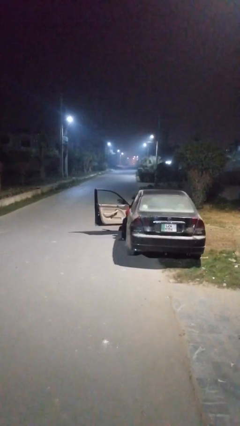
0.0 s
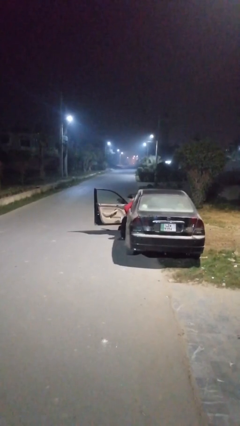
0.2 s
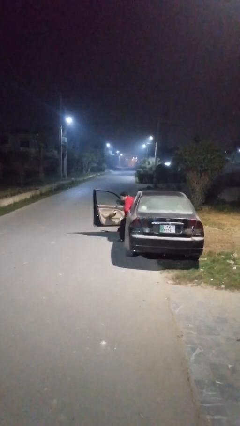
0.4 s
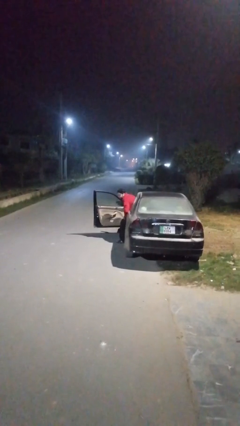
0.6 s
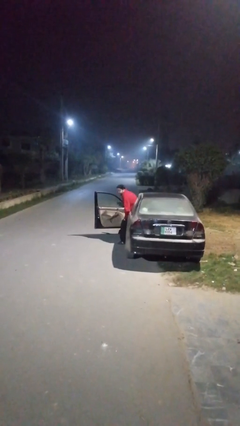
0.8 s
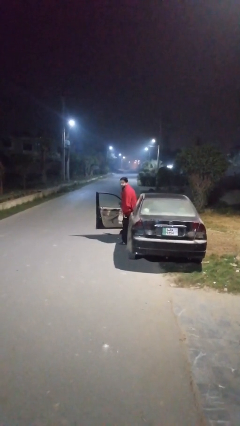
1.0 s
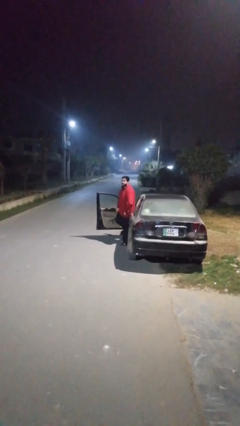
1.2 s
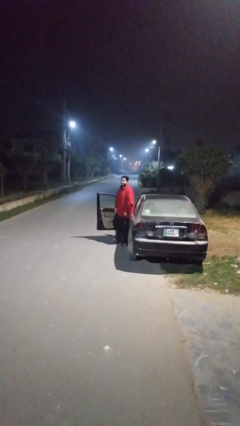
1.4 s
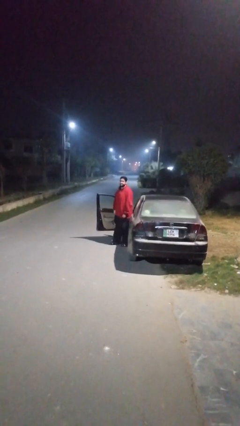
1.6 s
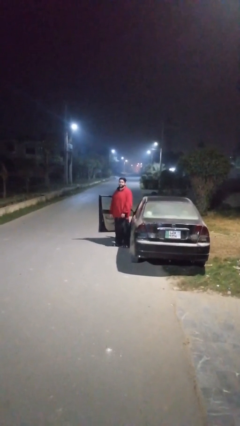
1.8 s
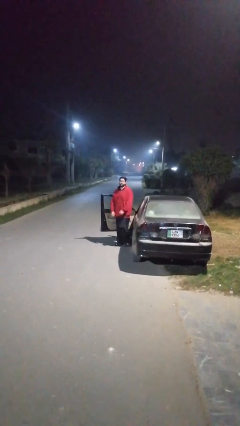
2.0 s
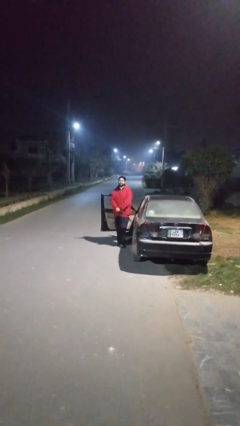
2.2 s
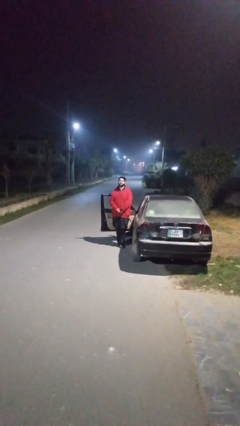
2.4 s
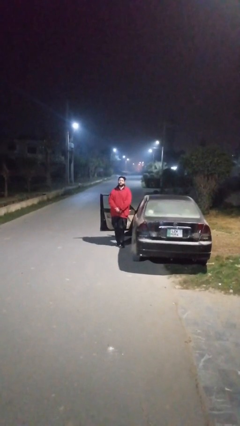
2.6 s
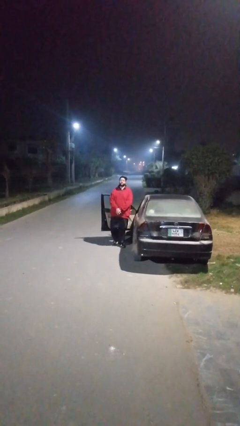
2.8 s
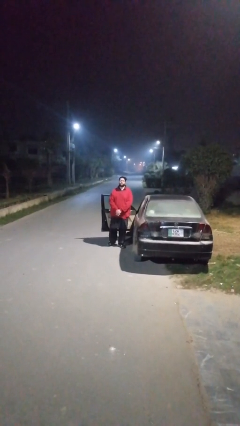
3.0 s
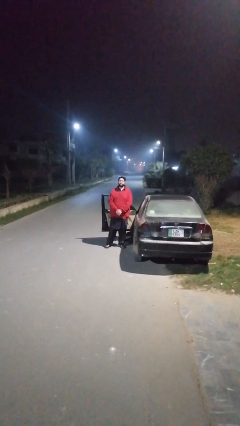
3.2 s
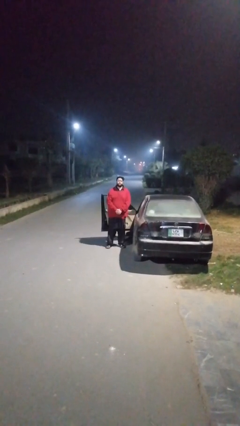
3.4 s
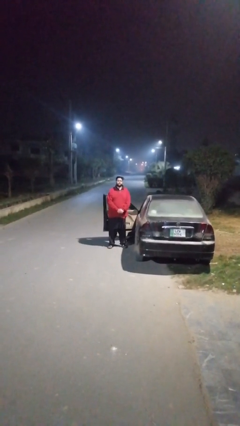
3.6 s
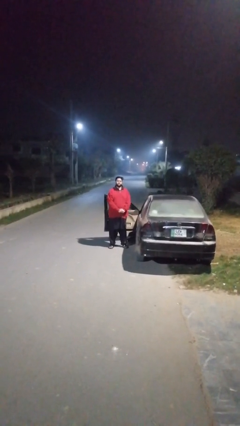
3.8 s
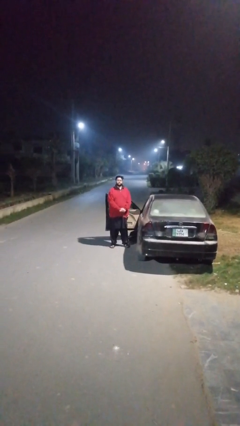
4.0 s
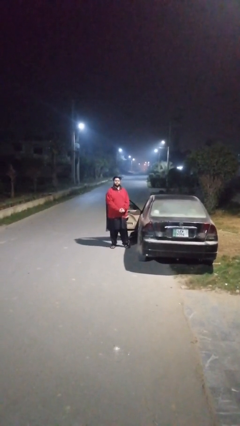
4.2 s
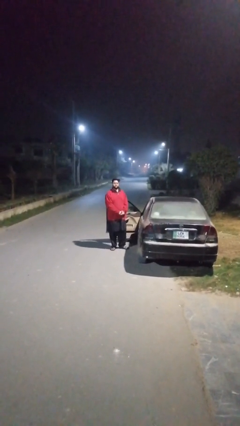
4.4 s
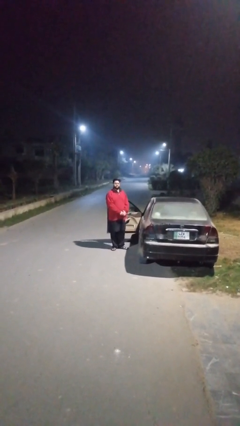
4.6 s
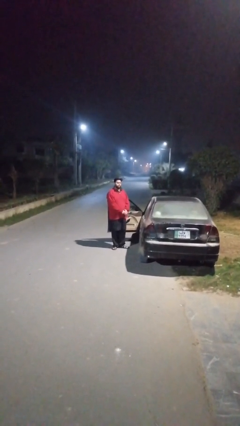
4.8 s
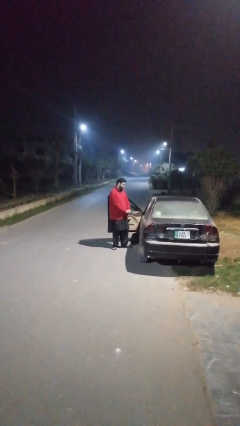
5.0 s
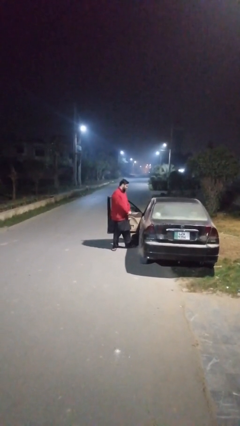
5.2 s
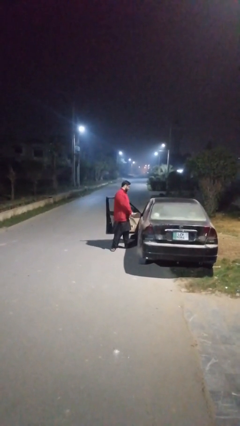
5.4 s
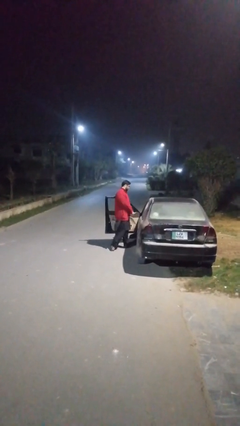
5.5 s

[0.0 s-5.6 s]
person exits car

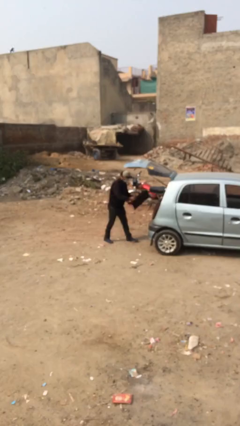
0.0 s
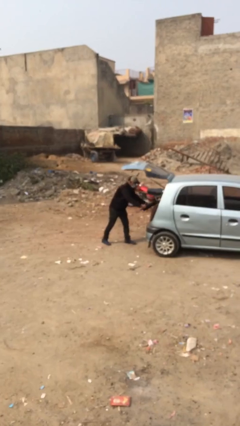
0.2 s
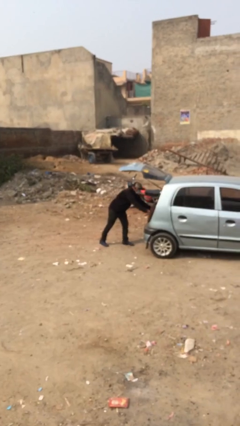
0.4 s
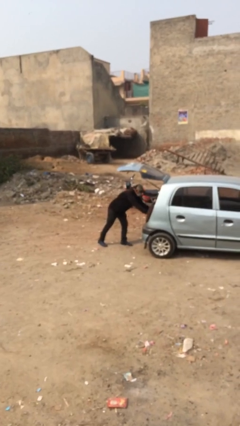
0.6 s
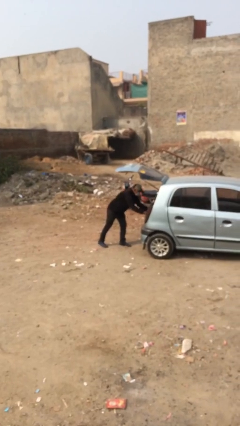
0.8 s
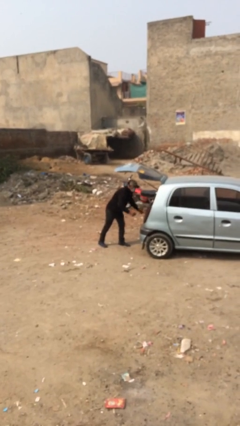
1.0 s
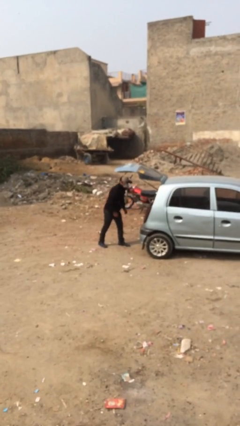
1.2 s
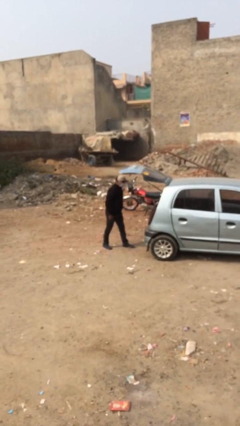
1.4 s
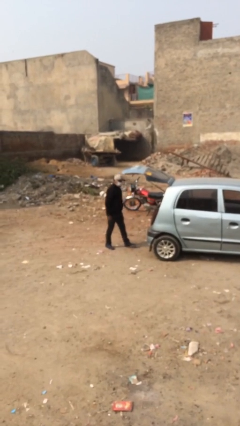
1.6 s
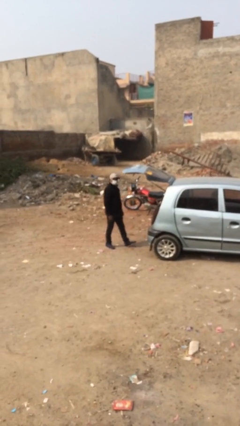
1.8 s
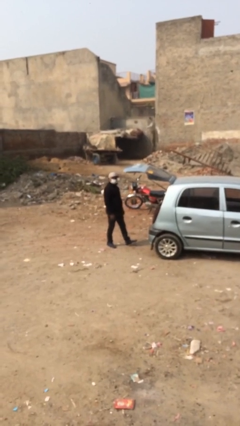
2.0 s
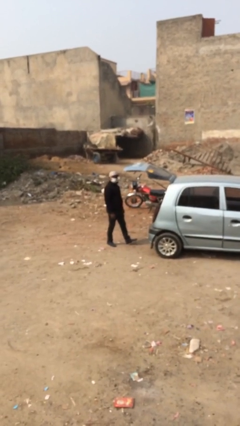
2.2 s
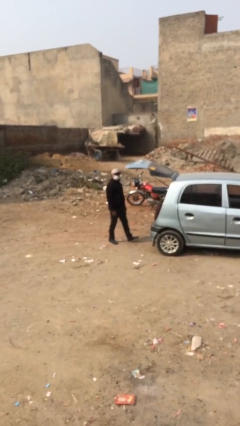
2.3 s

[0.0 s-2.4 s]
person loads car

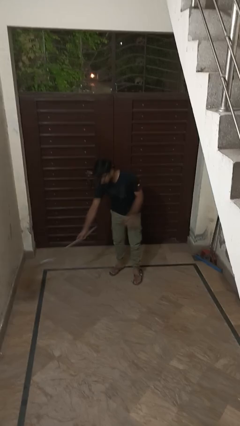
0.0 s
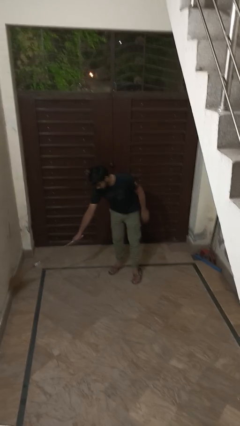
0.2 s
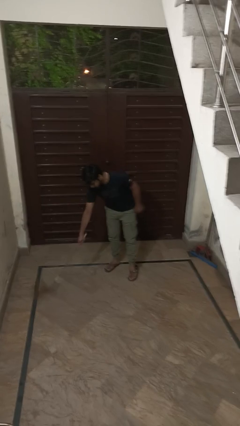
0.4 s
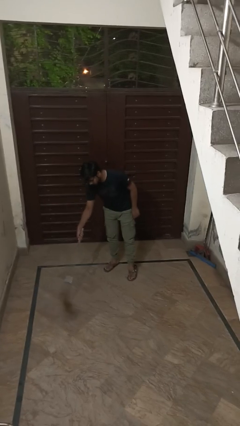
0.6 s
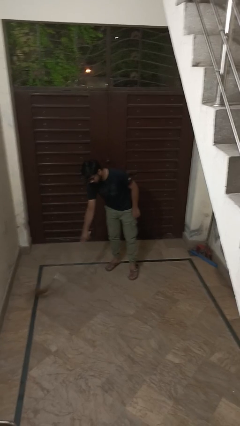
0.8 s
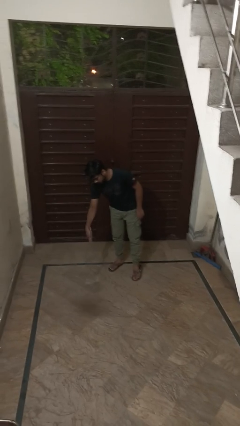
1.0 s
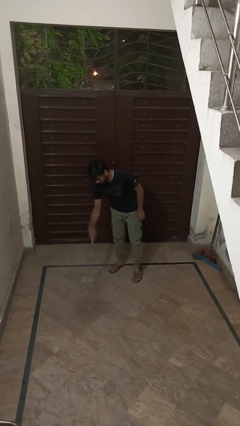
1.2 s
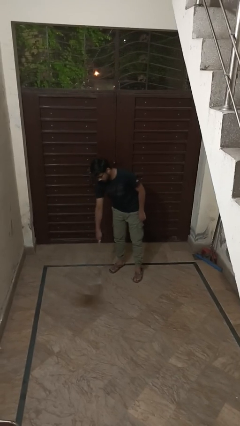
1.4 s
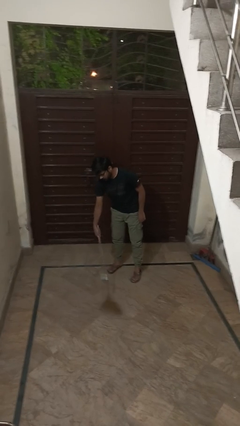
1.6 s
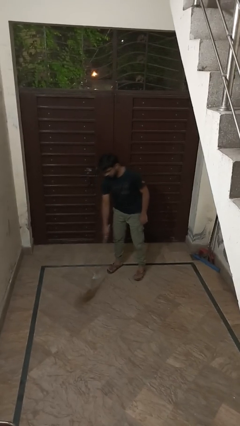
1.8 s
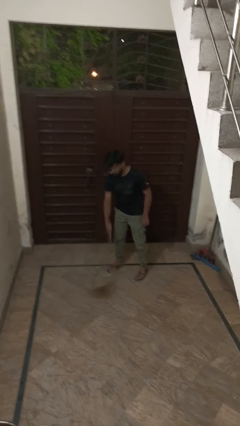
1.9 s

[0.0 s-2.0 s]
person sweeps floor

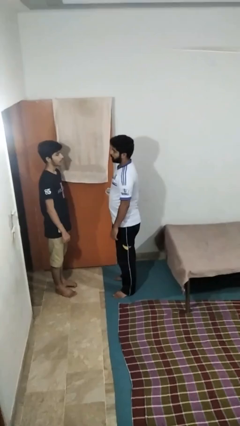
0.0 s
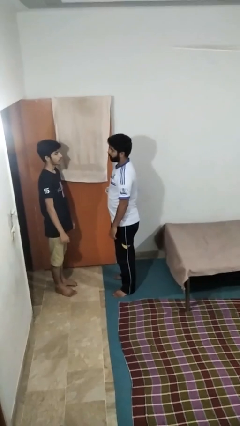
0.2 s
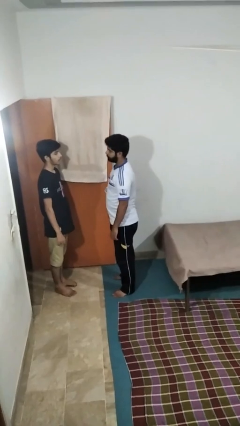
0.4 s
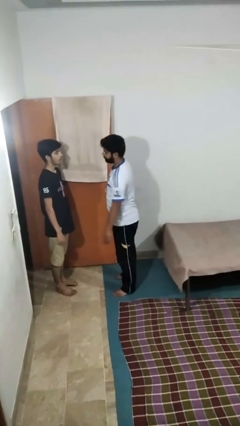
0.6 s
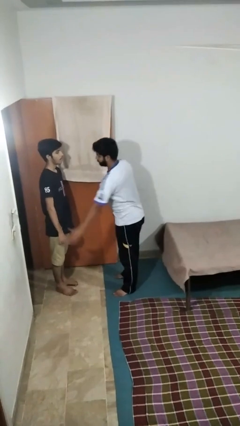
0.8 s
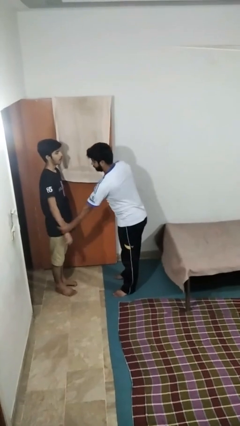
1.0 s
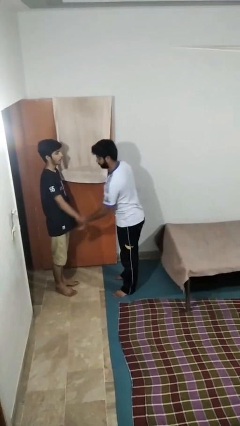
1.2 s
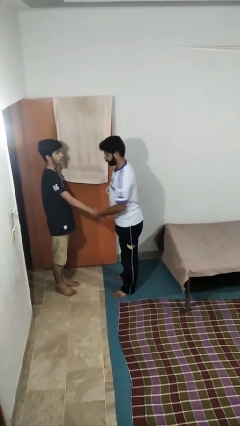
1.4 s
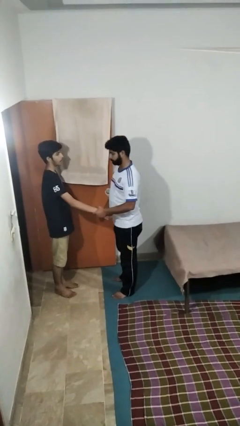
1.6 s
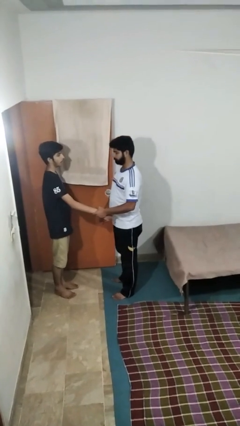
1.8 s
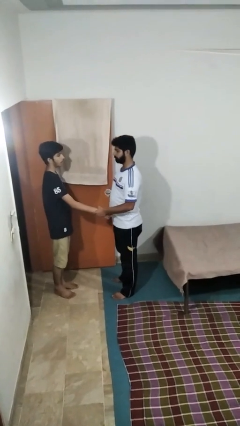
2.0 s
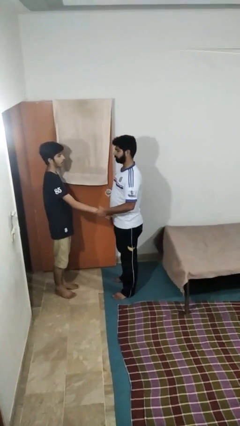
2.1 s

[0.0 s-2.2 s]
person grabs person by forearm

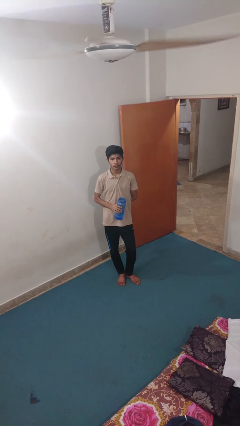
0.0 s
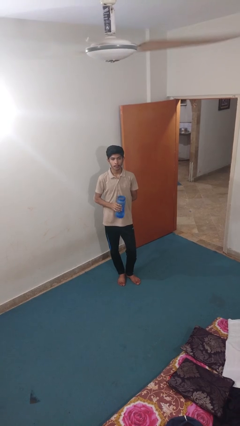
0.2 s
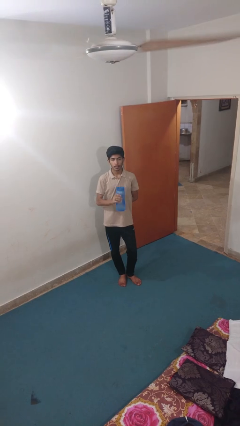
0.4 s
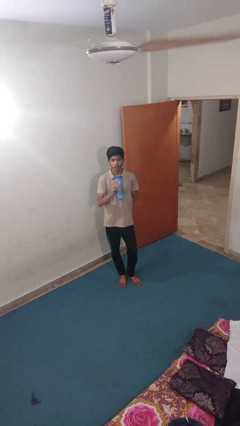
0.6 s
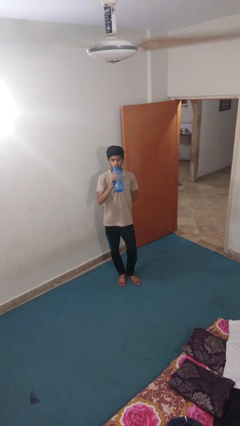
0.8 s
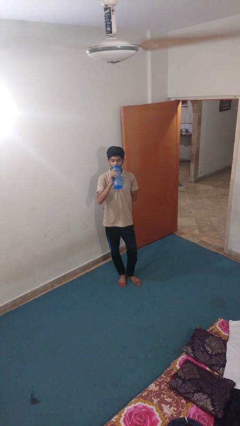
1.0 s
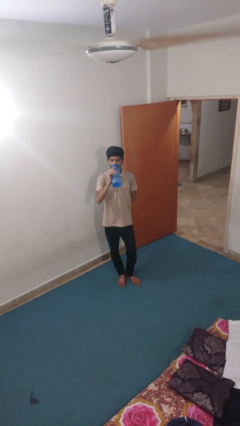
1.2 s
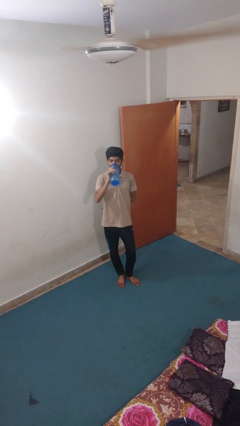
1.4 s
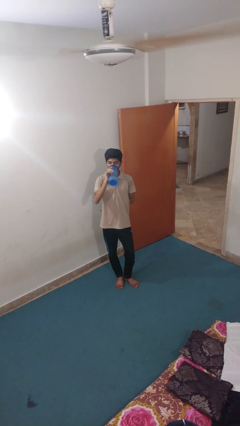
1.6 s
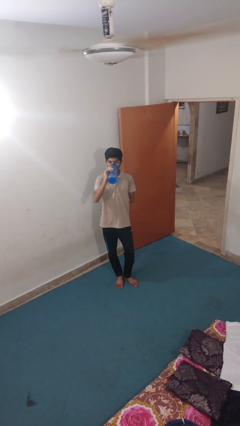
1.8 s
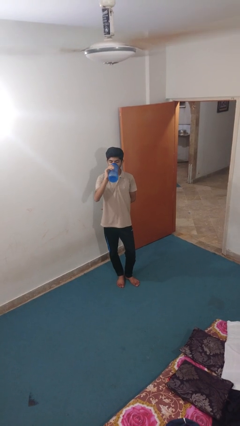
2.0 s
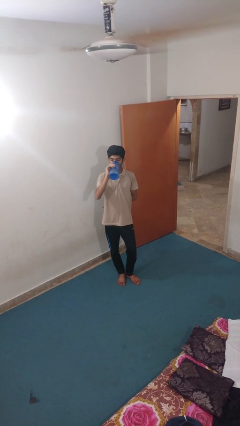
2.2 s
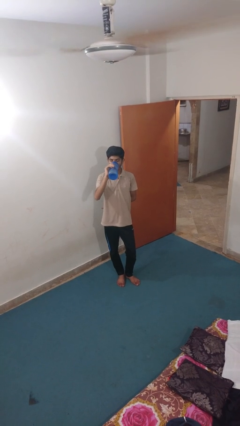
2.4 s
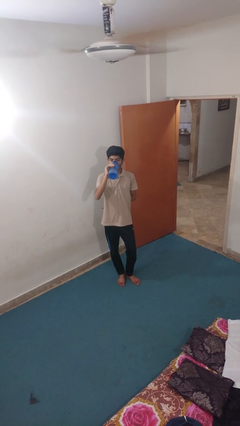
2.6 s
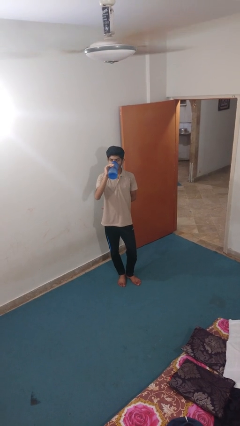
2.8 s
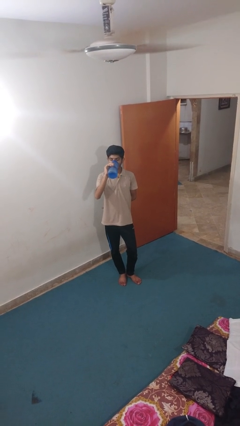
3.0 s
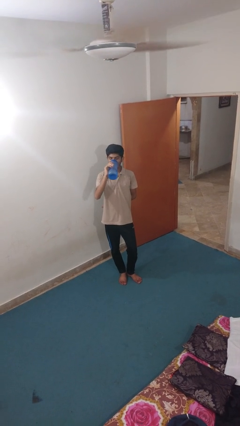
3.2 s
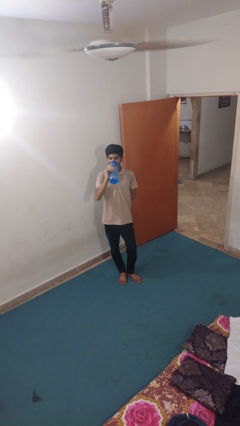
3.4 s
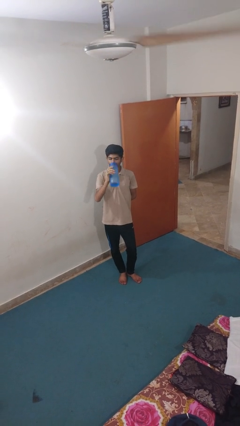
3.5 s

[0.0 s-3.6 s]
person drinks from bottle

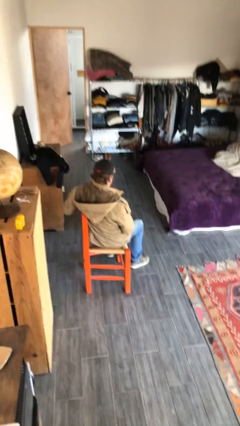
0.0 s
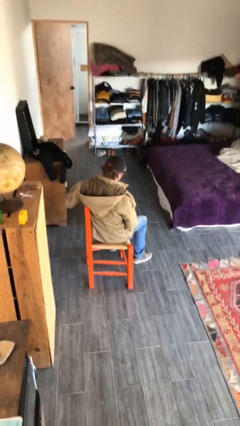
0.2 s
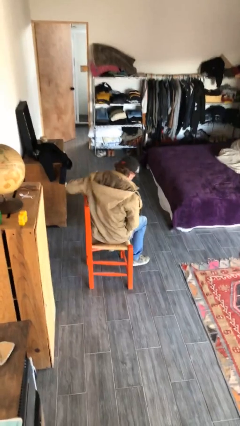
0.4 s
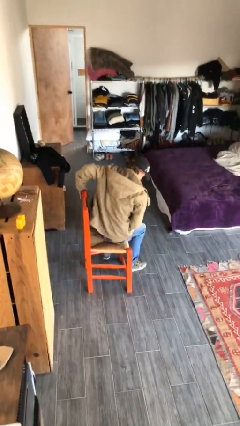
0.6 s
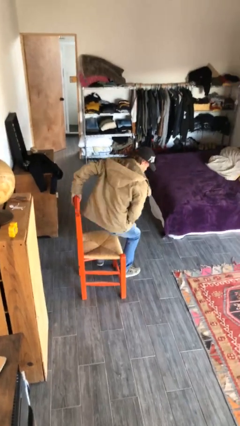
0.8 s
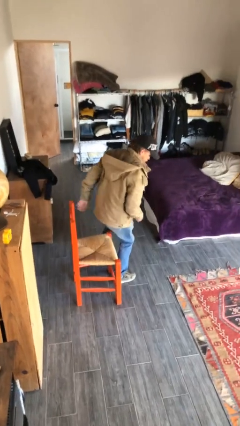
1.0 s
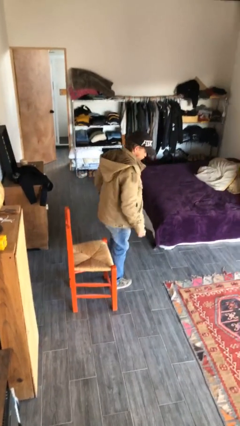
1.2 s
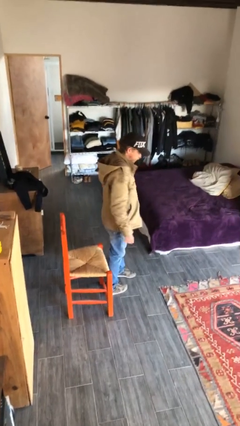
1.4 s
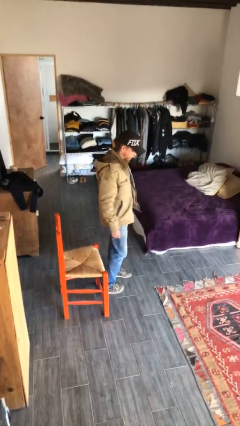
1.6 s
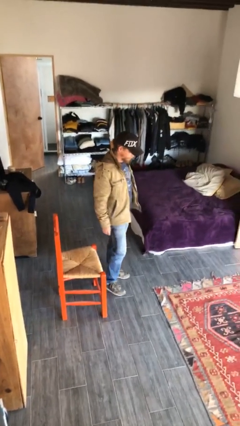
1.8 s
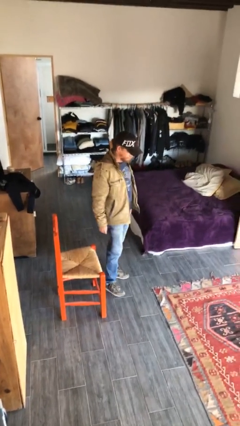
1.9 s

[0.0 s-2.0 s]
person stands up

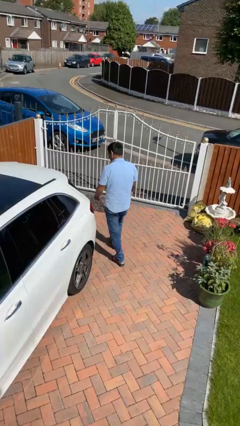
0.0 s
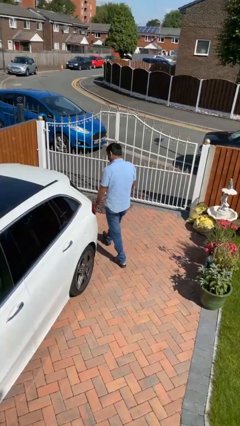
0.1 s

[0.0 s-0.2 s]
person walks around car
